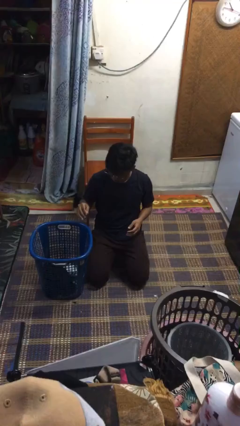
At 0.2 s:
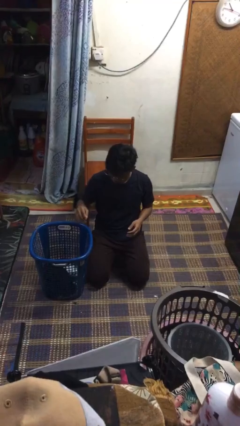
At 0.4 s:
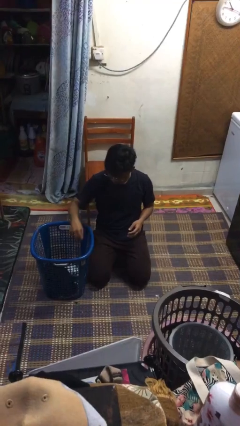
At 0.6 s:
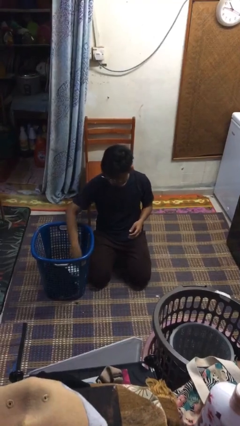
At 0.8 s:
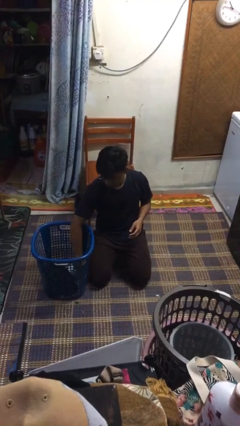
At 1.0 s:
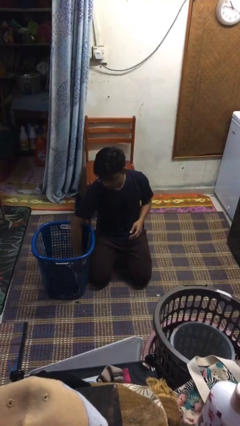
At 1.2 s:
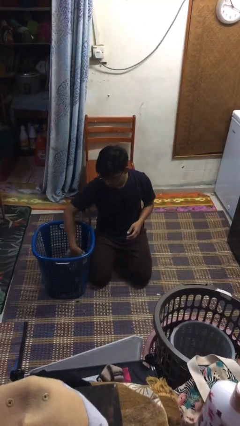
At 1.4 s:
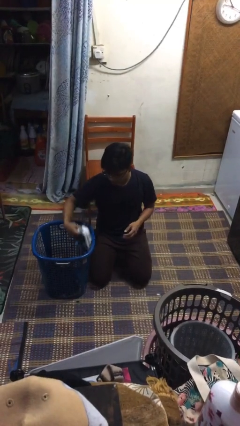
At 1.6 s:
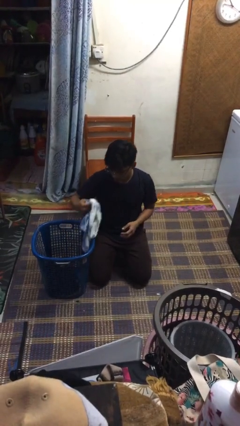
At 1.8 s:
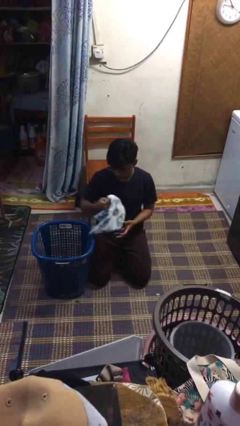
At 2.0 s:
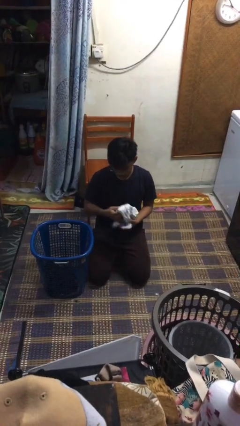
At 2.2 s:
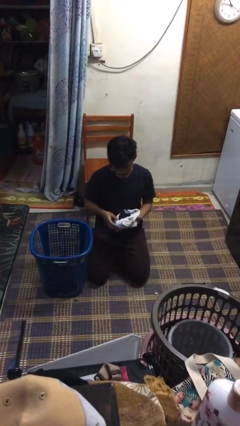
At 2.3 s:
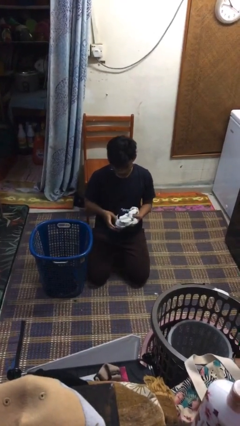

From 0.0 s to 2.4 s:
person takes object from basket

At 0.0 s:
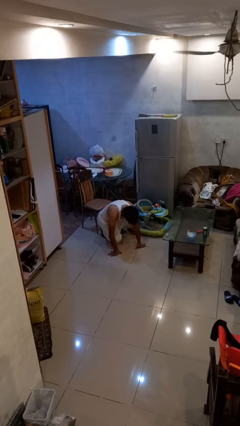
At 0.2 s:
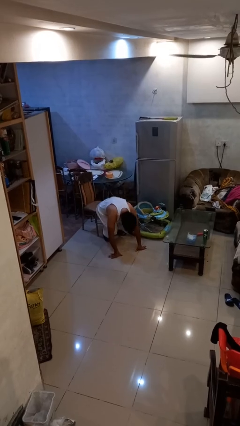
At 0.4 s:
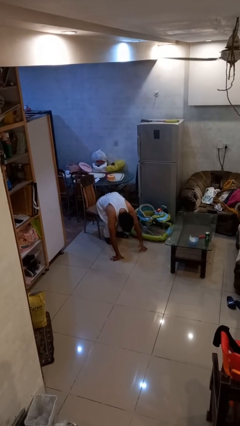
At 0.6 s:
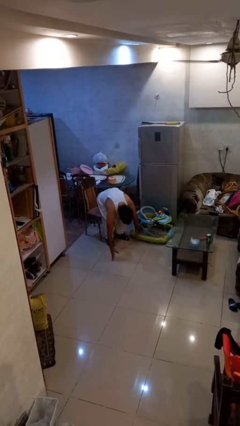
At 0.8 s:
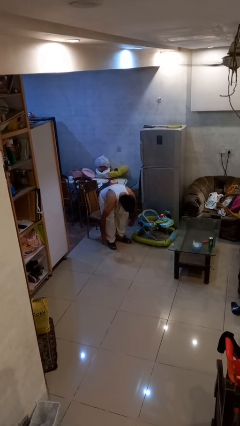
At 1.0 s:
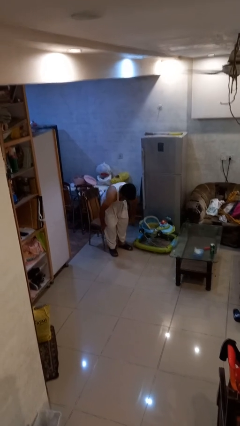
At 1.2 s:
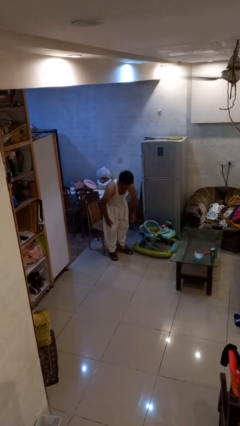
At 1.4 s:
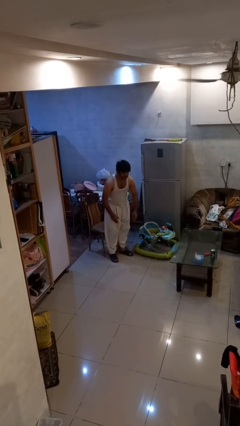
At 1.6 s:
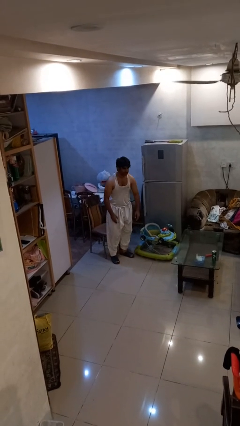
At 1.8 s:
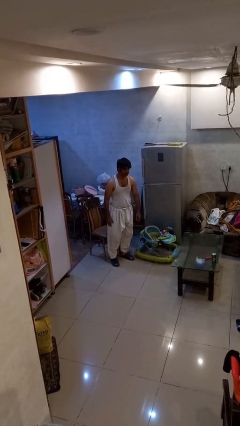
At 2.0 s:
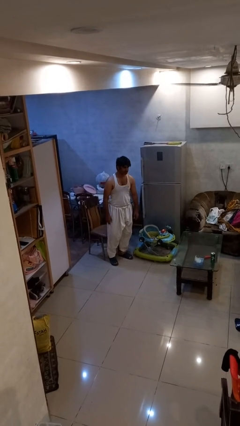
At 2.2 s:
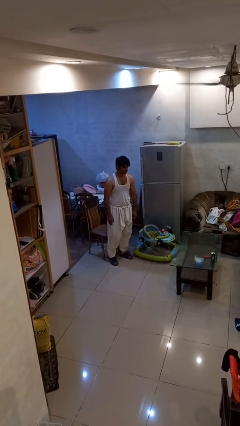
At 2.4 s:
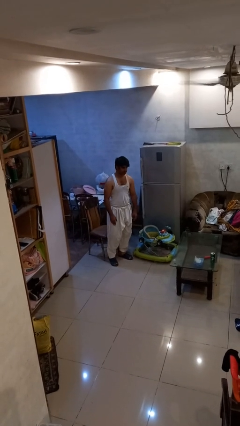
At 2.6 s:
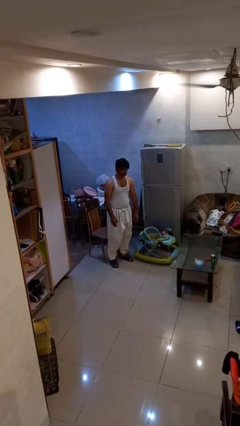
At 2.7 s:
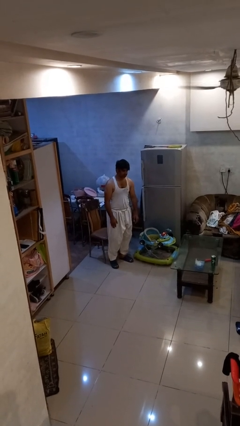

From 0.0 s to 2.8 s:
person stands up from floor

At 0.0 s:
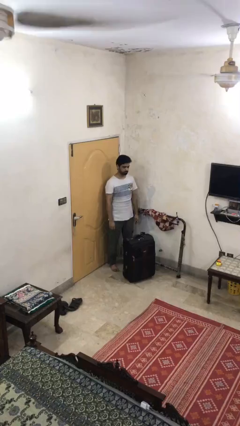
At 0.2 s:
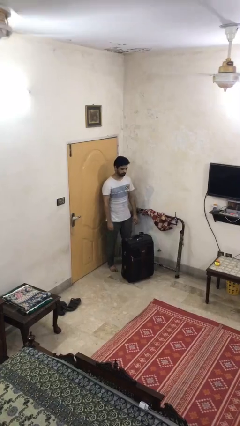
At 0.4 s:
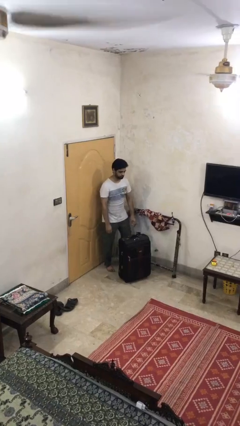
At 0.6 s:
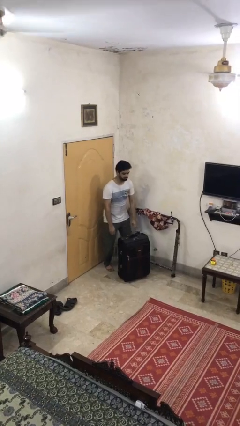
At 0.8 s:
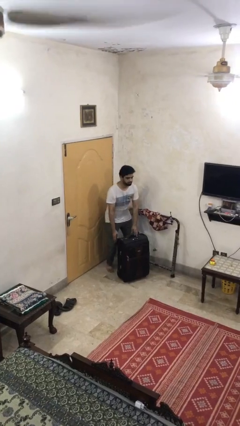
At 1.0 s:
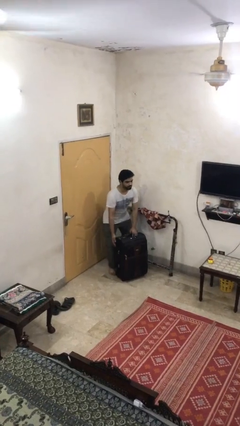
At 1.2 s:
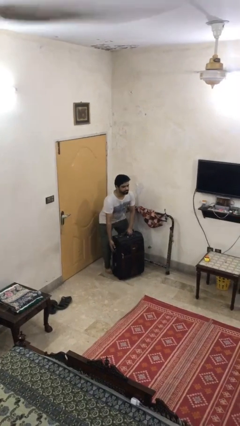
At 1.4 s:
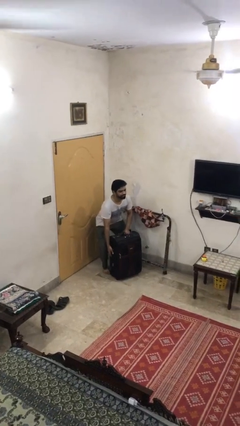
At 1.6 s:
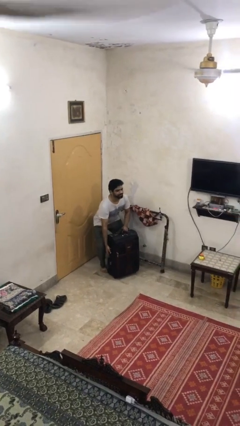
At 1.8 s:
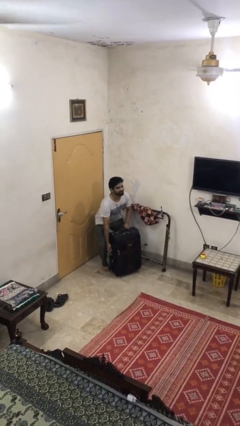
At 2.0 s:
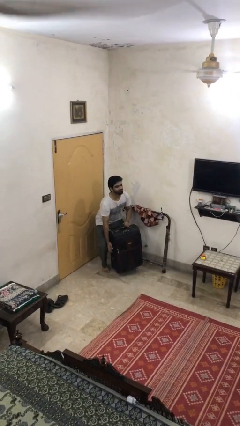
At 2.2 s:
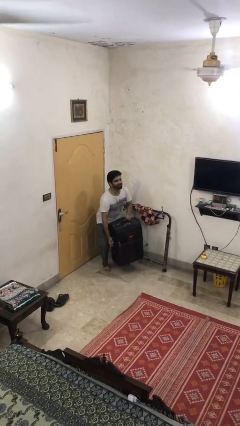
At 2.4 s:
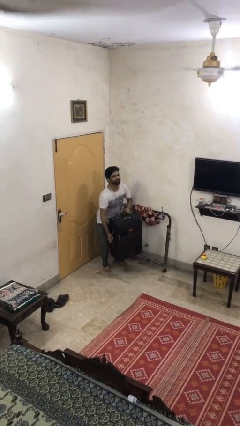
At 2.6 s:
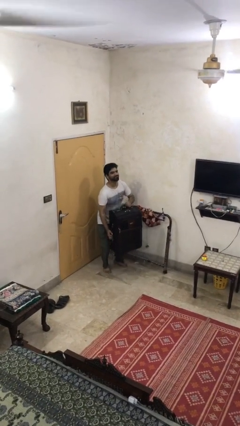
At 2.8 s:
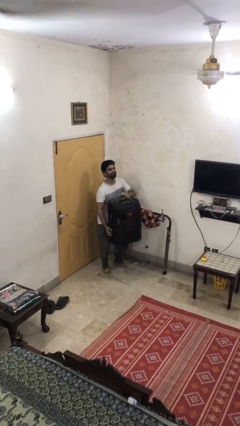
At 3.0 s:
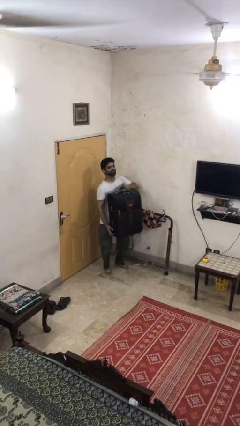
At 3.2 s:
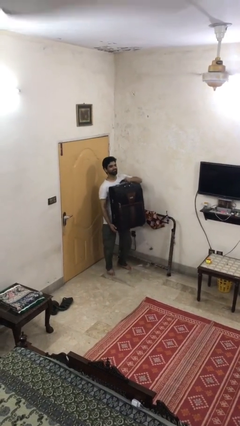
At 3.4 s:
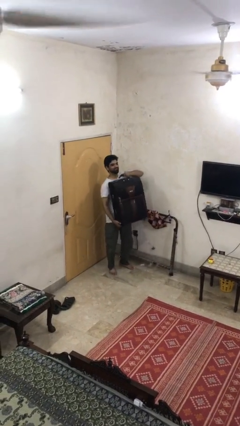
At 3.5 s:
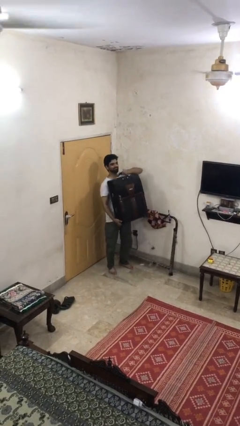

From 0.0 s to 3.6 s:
person picks up object from floor

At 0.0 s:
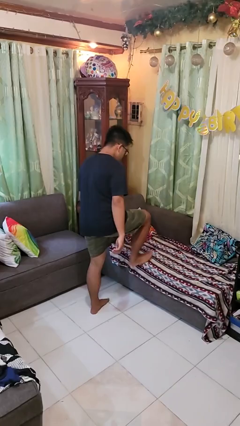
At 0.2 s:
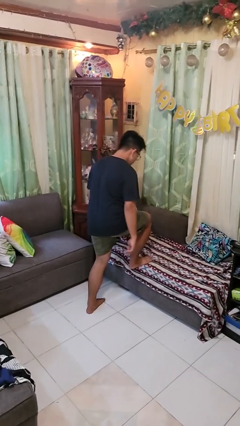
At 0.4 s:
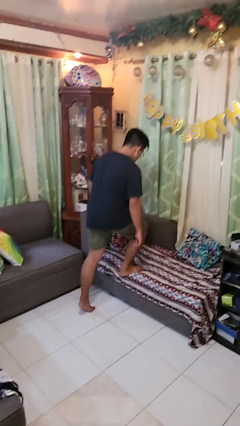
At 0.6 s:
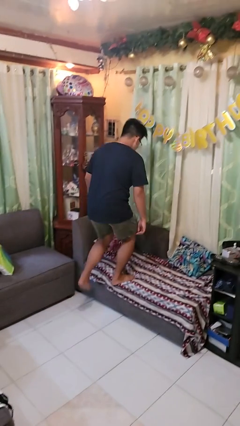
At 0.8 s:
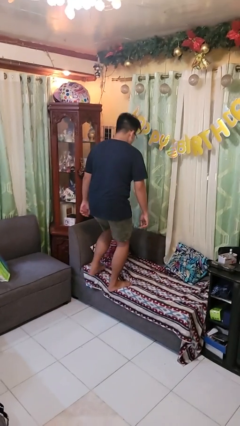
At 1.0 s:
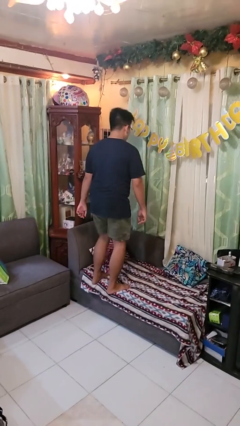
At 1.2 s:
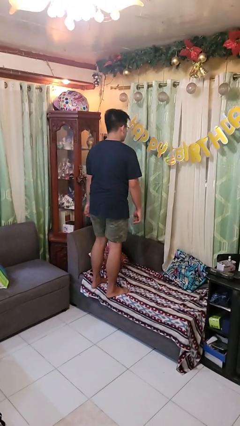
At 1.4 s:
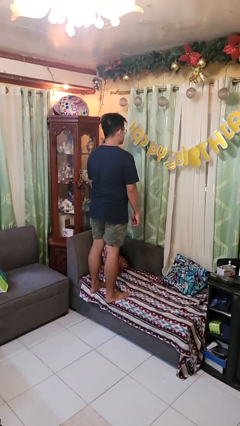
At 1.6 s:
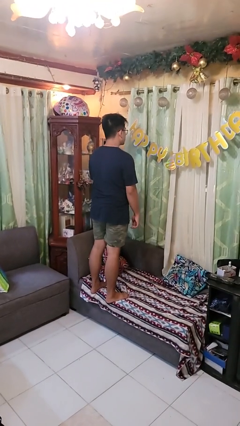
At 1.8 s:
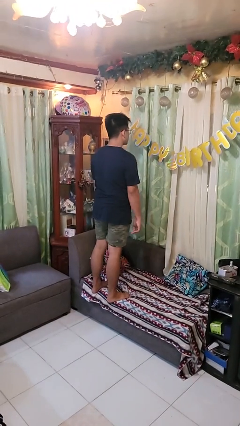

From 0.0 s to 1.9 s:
person climbs on couch

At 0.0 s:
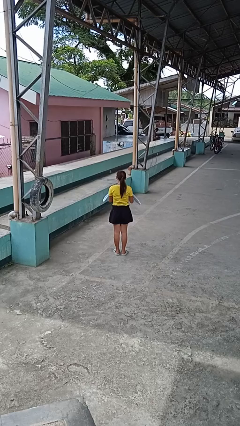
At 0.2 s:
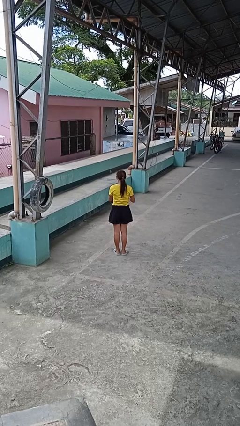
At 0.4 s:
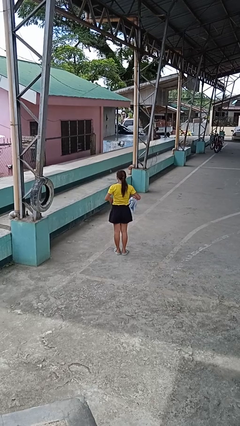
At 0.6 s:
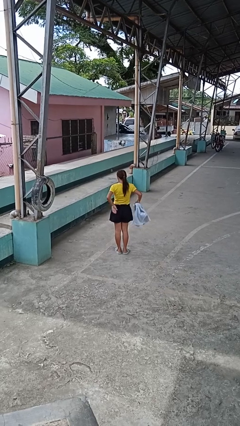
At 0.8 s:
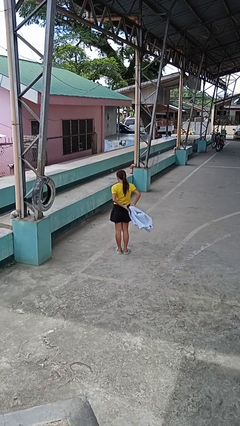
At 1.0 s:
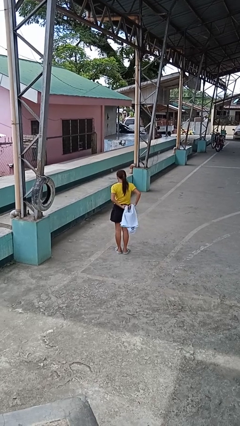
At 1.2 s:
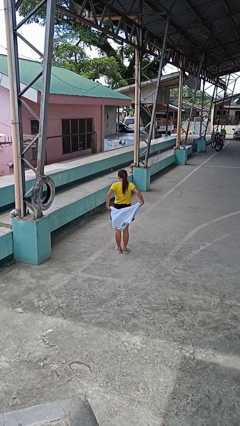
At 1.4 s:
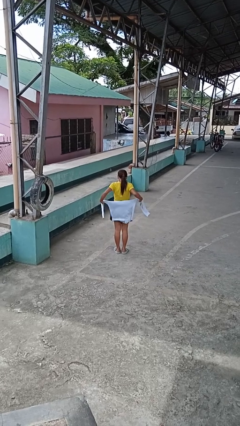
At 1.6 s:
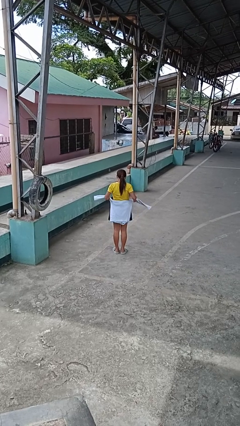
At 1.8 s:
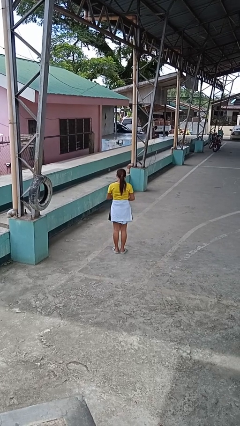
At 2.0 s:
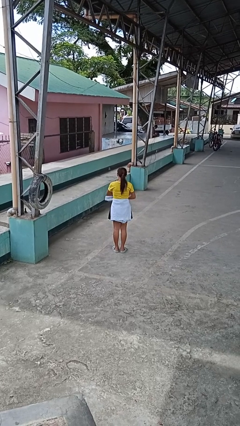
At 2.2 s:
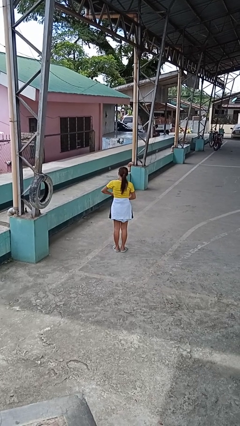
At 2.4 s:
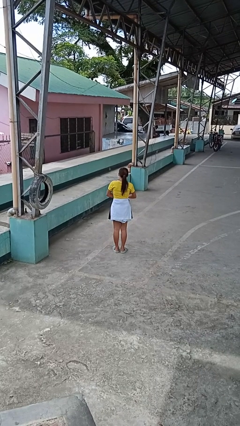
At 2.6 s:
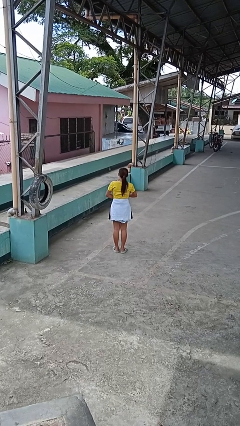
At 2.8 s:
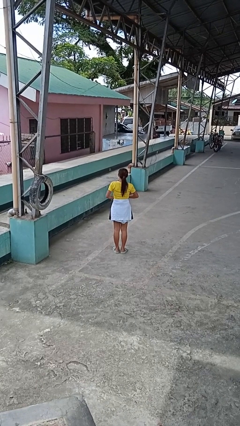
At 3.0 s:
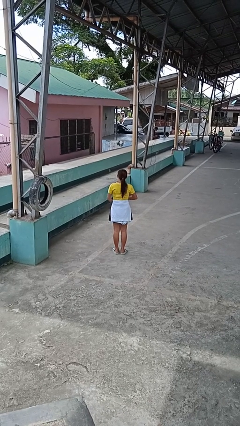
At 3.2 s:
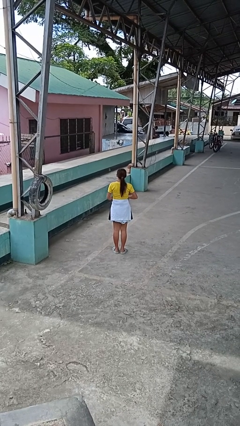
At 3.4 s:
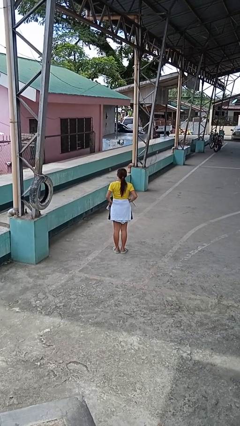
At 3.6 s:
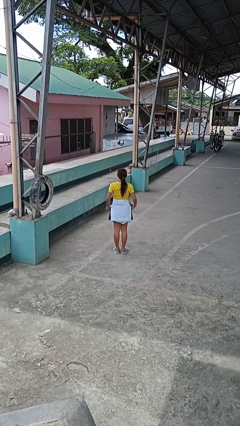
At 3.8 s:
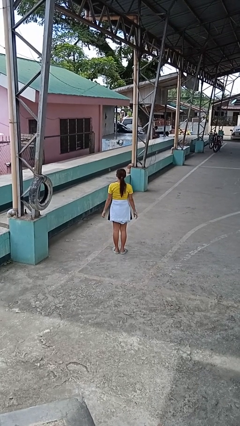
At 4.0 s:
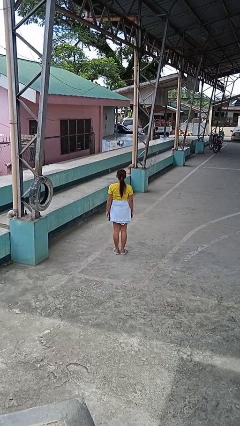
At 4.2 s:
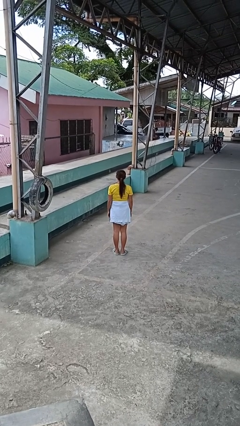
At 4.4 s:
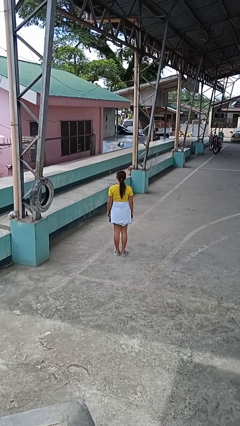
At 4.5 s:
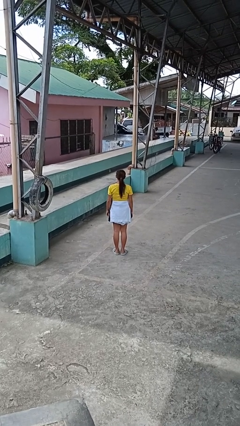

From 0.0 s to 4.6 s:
person ties jacket around waist

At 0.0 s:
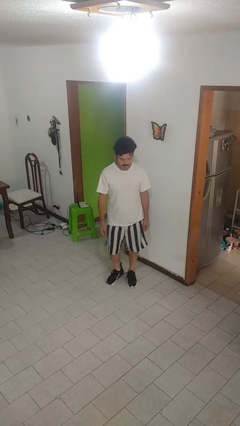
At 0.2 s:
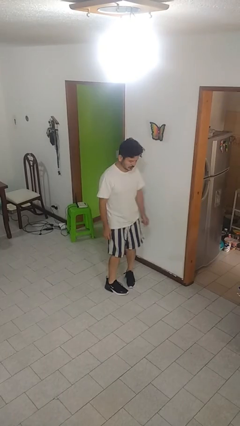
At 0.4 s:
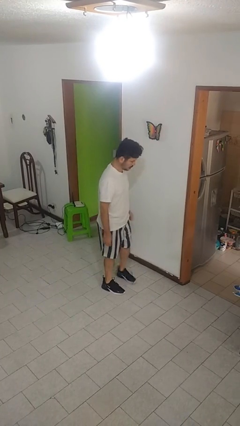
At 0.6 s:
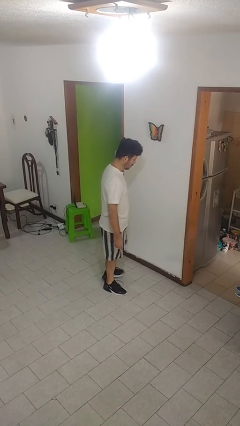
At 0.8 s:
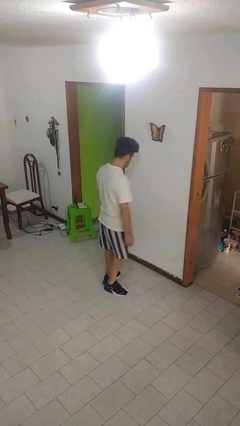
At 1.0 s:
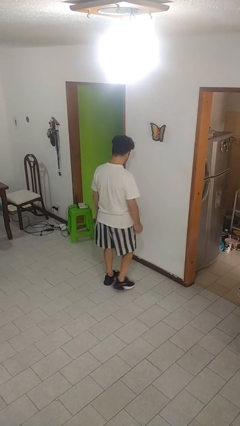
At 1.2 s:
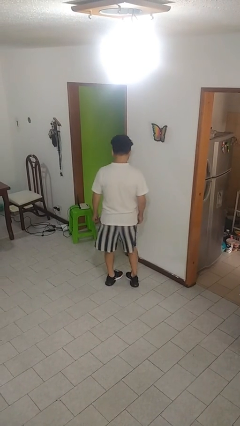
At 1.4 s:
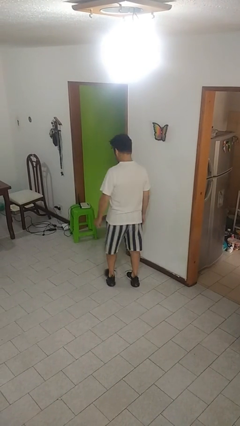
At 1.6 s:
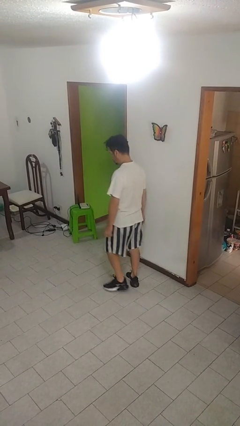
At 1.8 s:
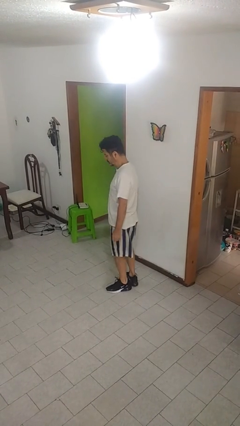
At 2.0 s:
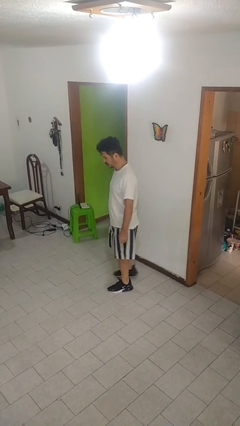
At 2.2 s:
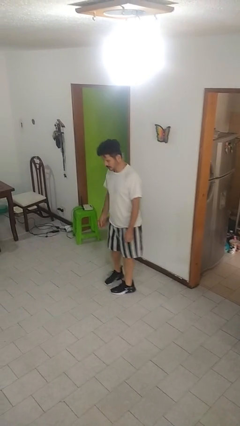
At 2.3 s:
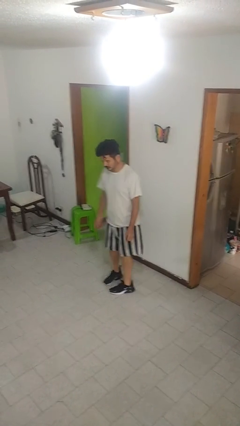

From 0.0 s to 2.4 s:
person twirls
